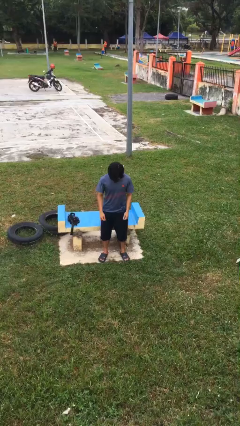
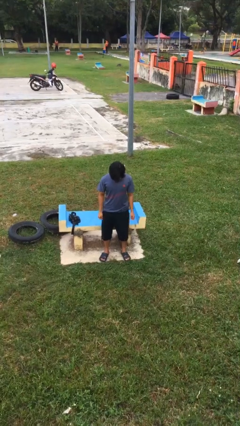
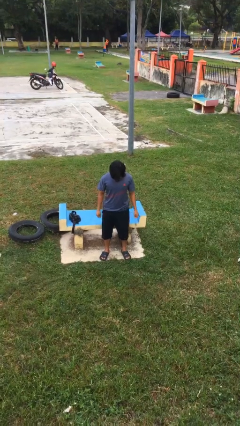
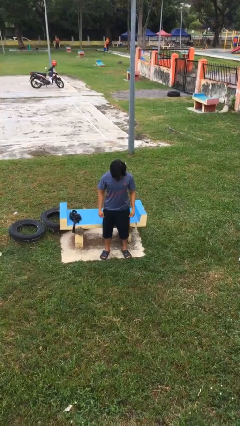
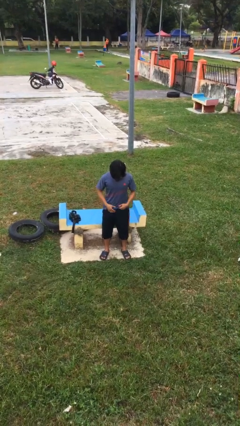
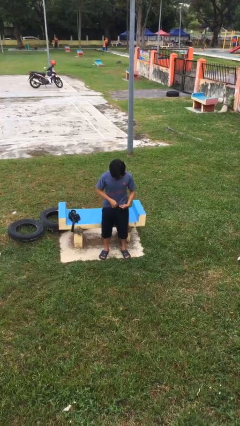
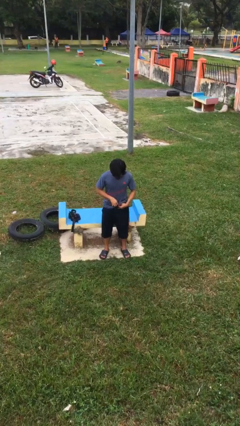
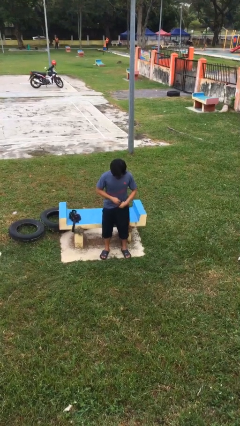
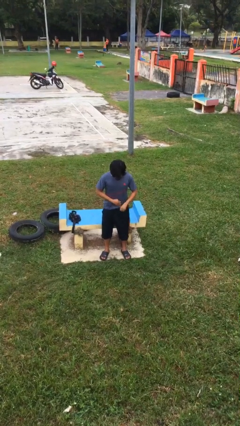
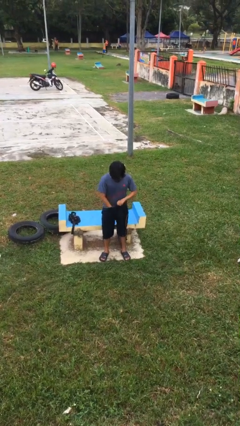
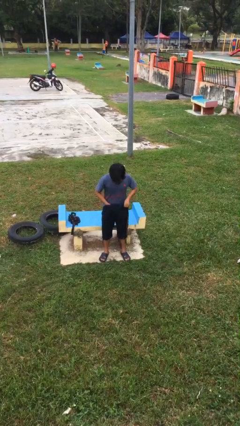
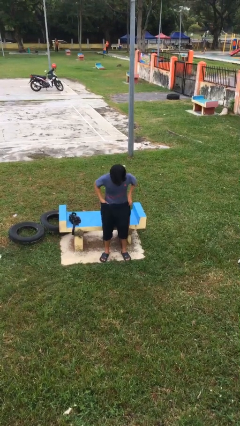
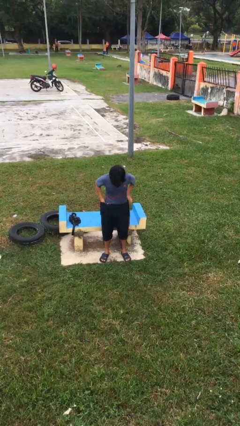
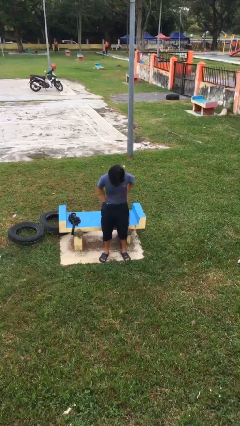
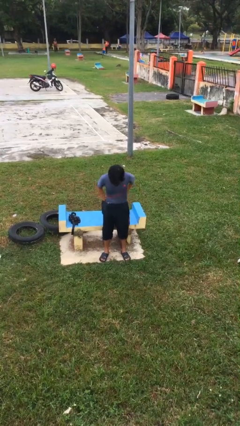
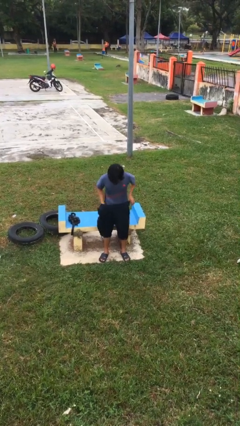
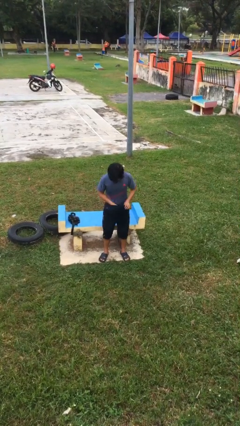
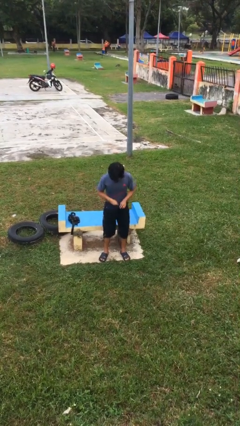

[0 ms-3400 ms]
person tucks in shirt

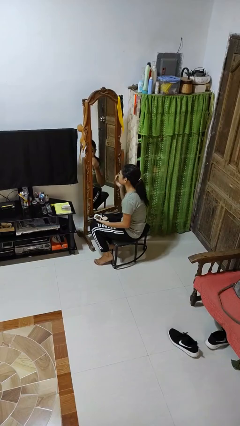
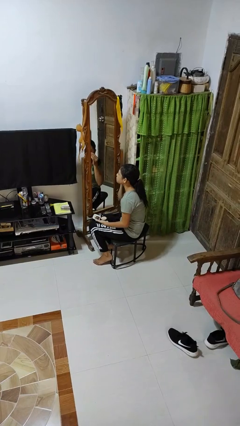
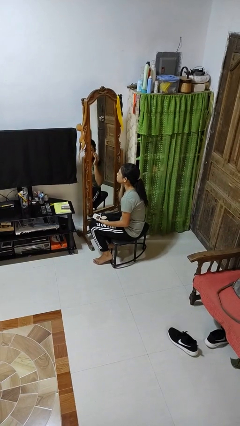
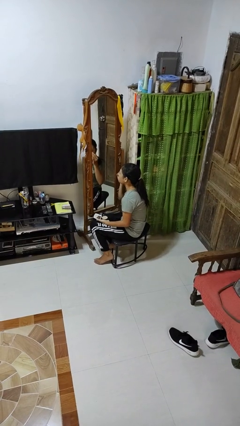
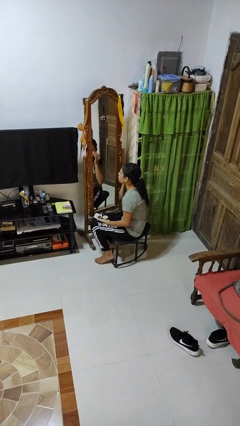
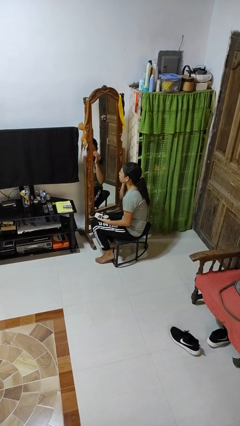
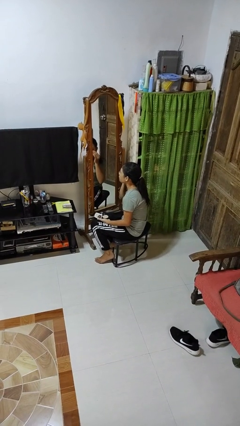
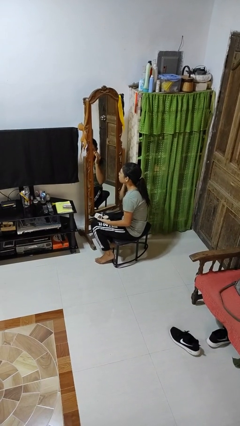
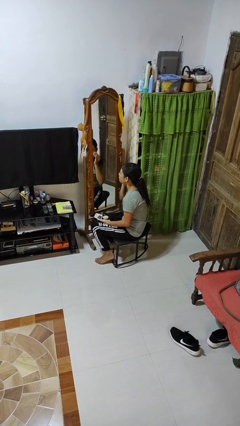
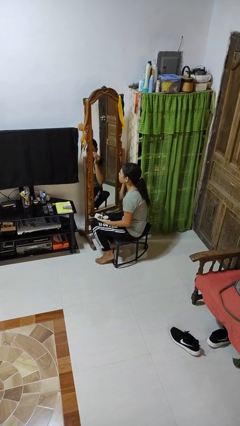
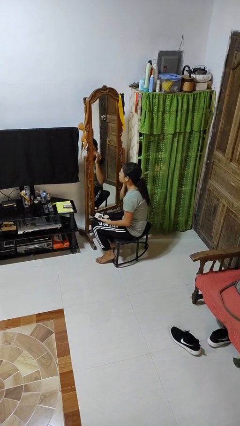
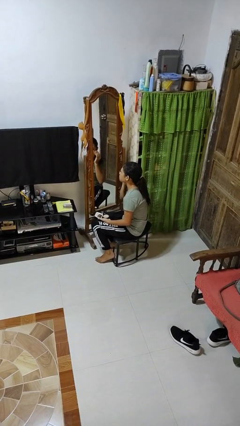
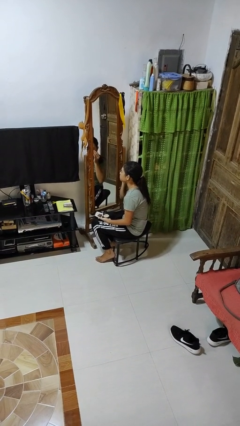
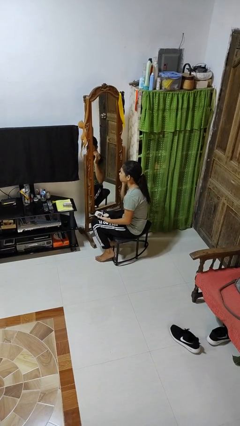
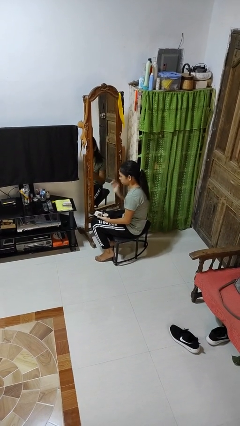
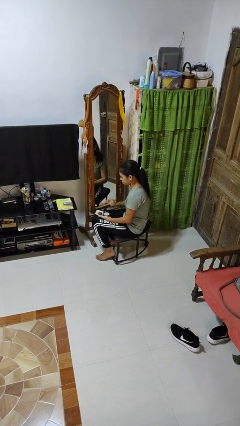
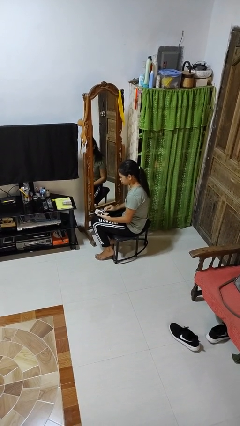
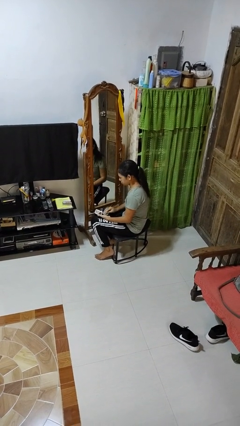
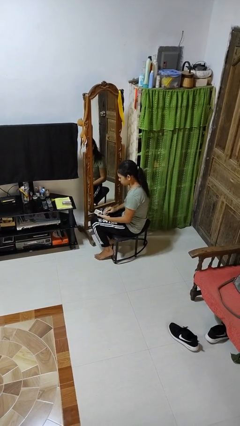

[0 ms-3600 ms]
person applies foundation makeup

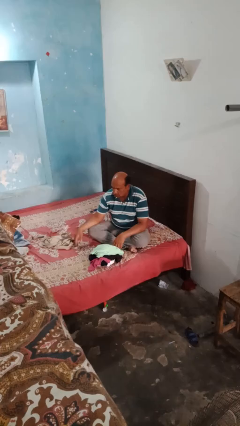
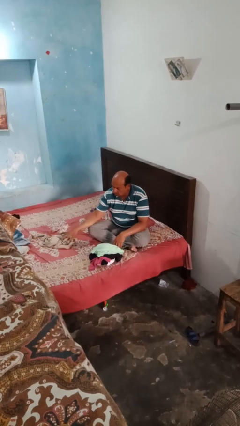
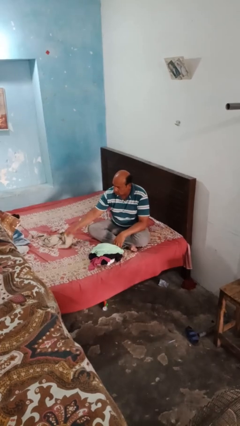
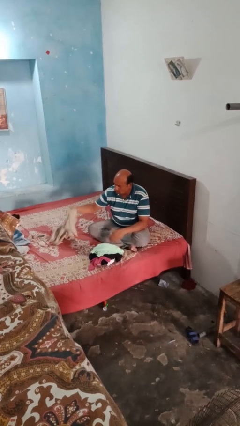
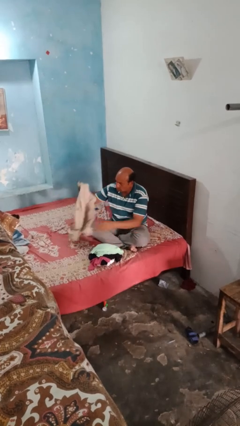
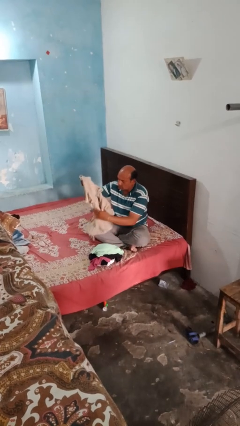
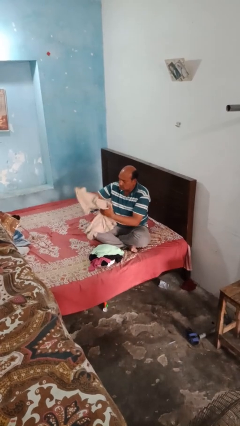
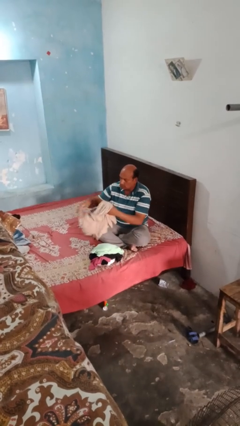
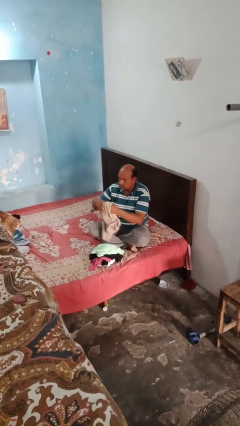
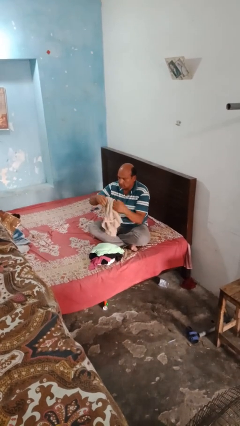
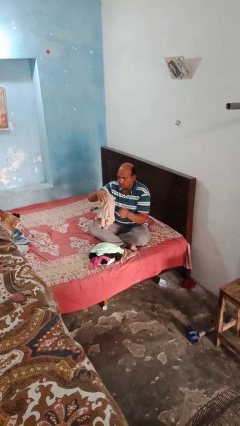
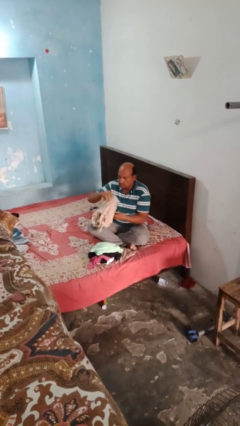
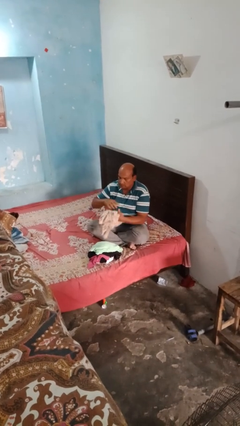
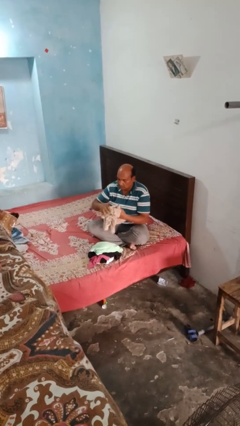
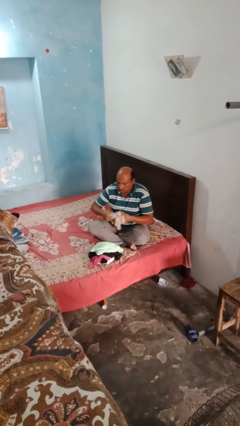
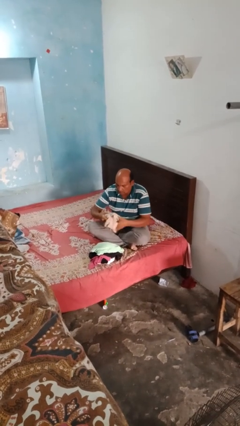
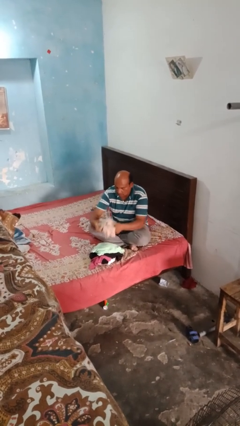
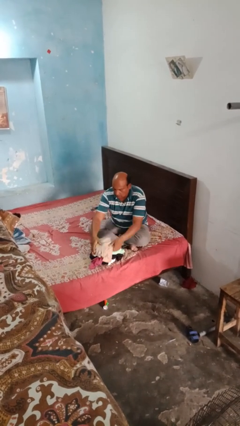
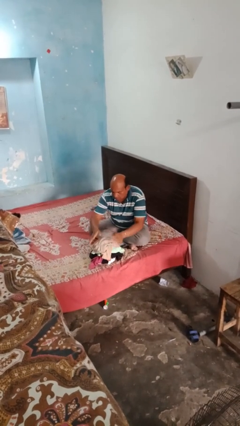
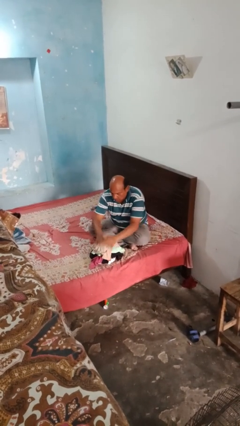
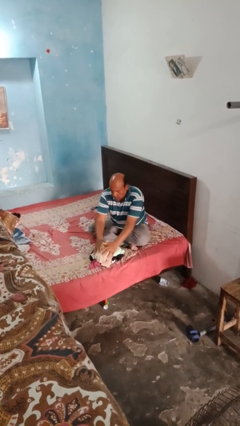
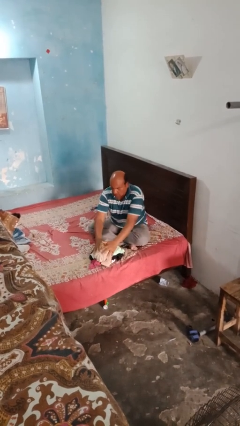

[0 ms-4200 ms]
person folds shirt

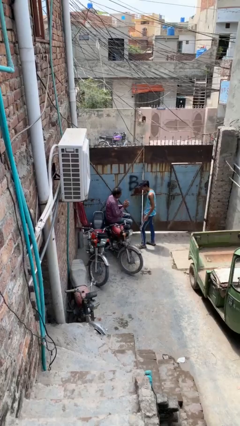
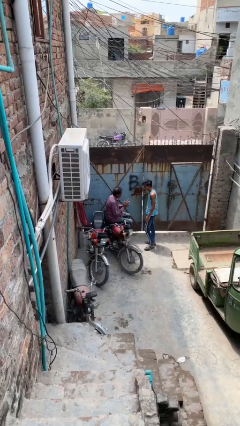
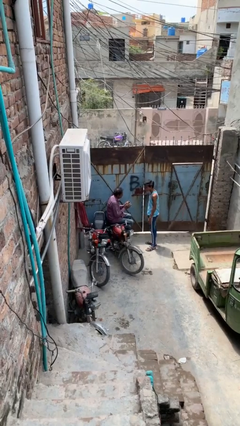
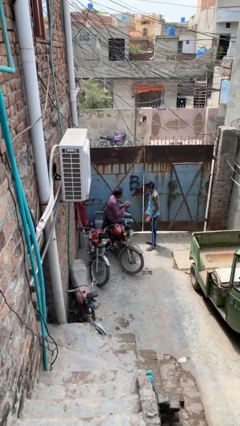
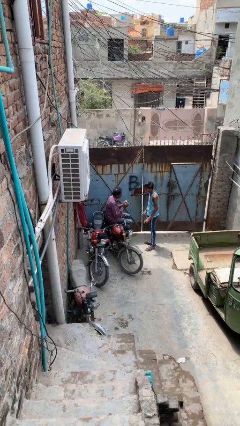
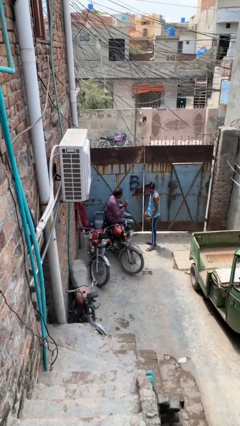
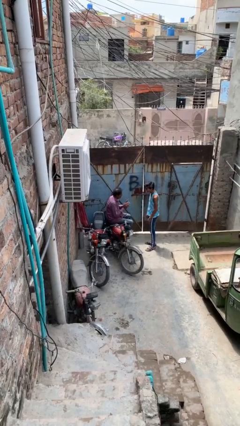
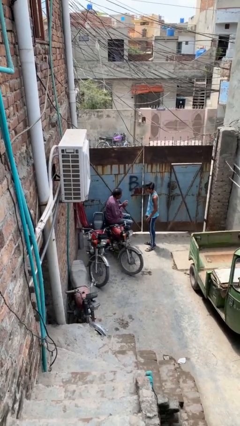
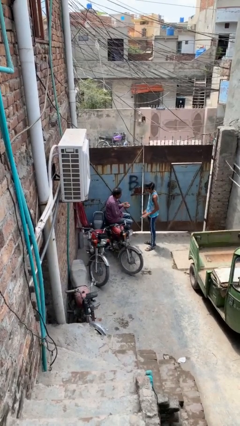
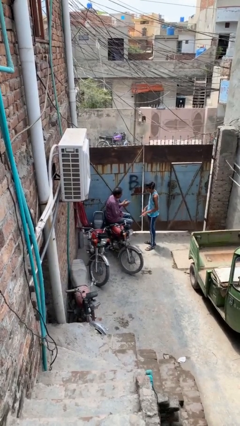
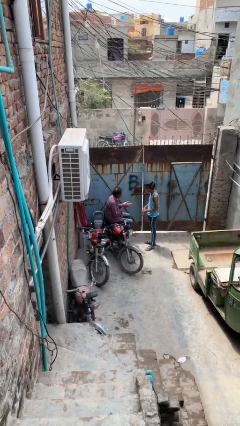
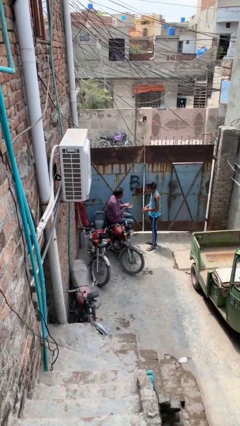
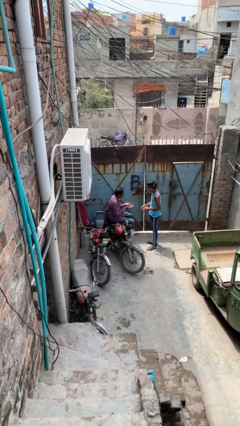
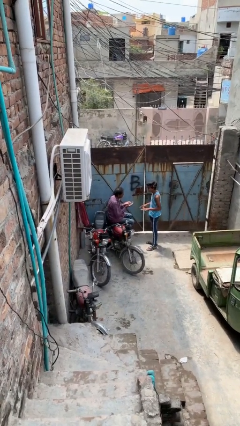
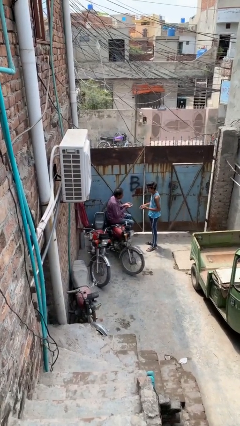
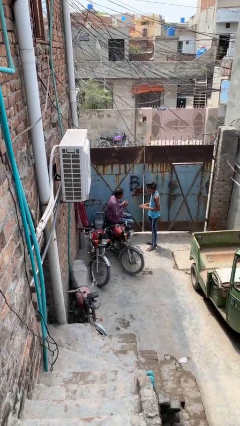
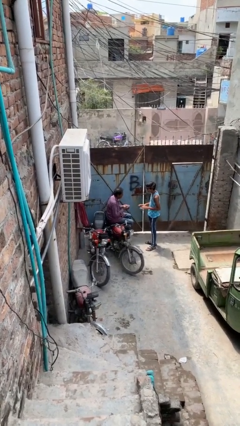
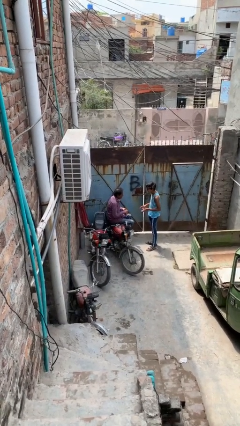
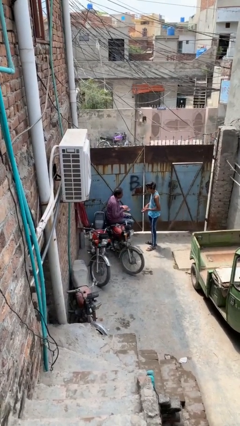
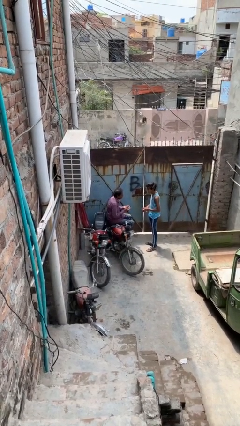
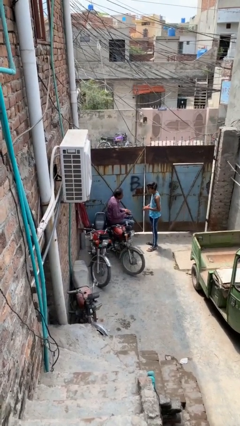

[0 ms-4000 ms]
person talks to person

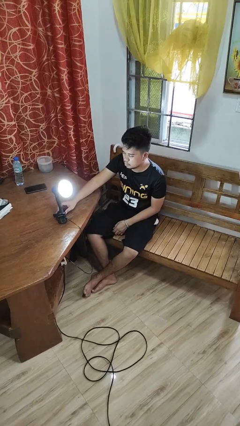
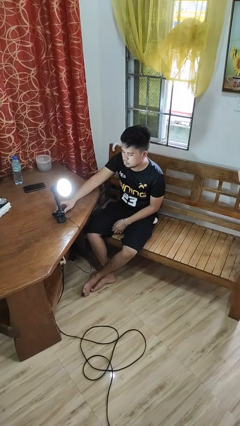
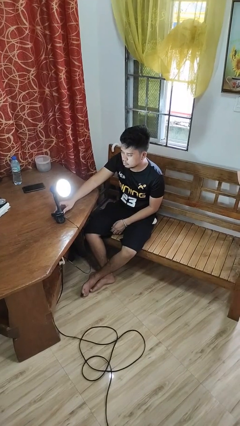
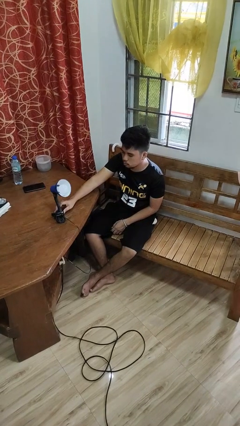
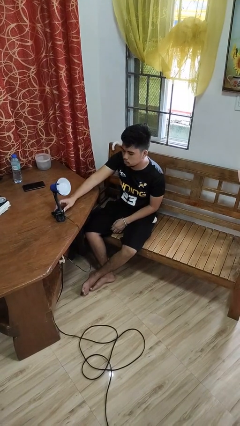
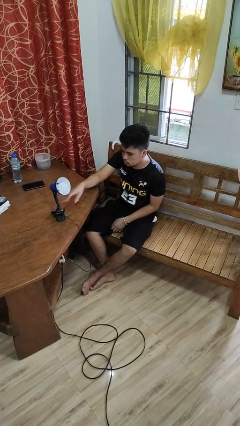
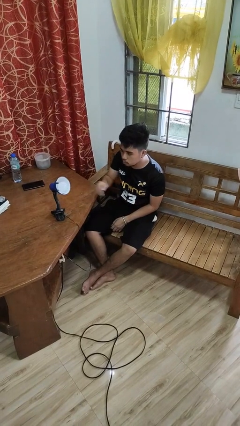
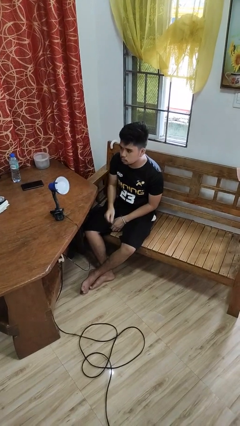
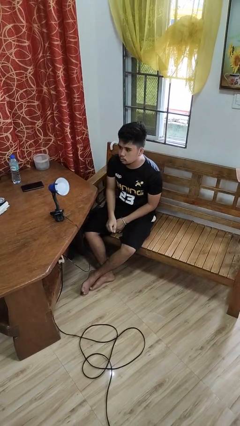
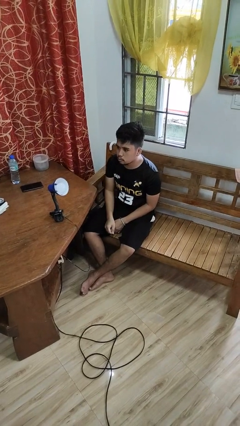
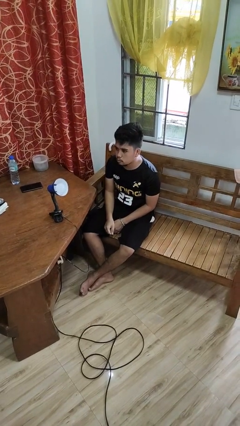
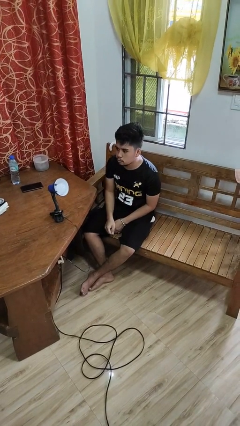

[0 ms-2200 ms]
person turns off lamp

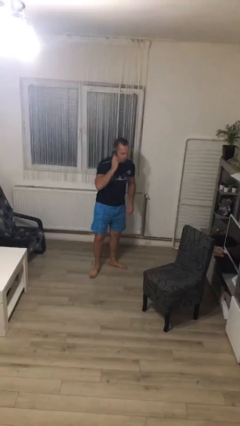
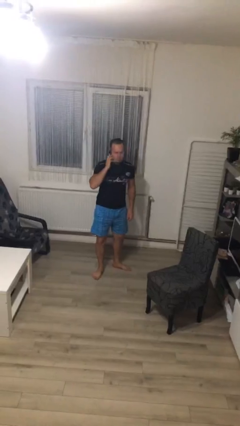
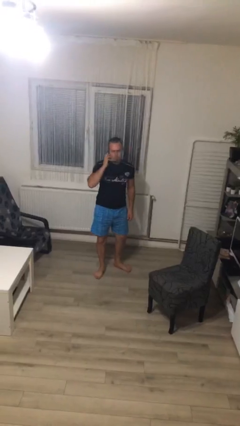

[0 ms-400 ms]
person talks on phone
